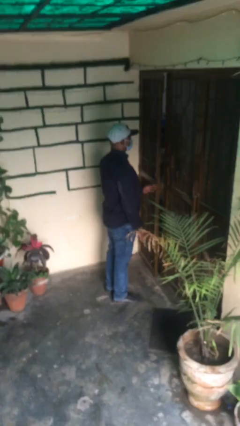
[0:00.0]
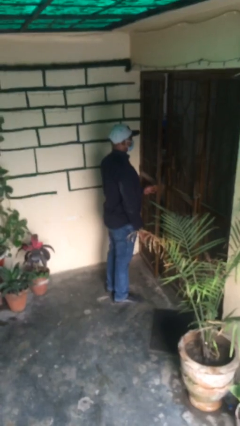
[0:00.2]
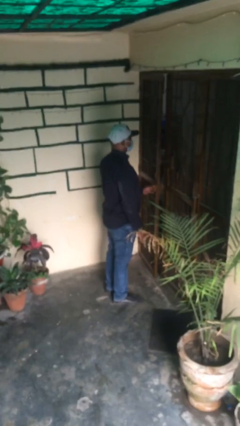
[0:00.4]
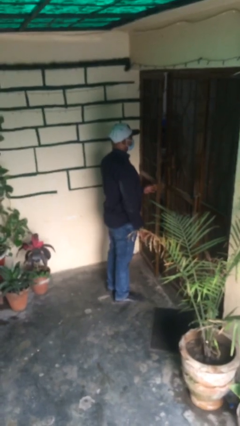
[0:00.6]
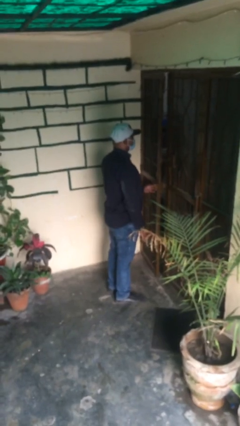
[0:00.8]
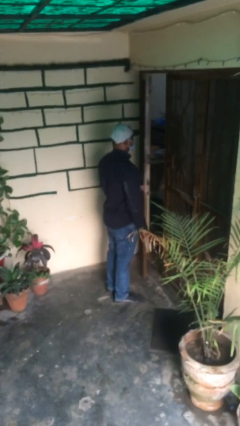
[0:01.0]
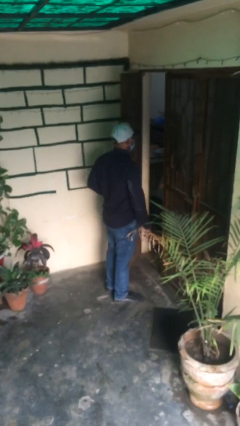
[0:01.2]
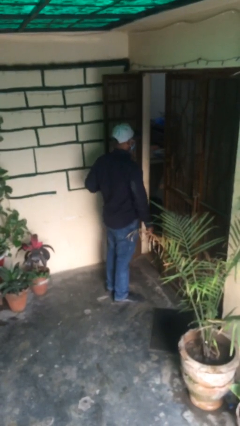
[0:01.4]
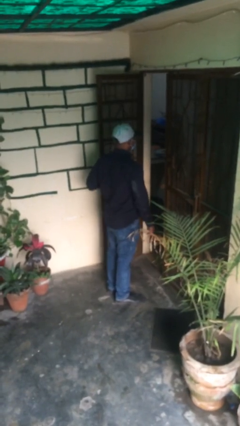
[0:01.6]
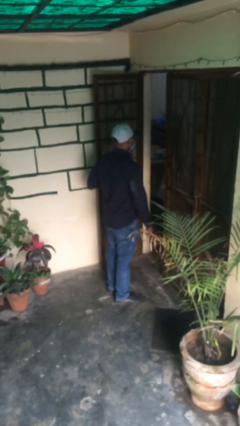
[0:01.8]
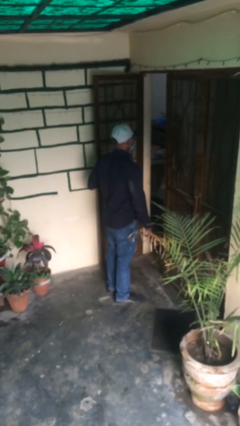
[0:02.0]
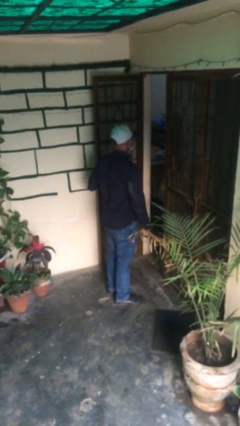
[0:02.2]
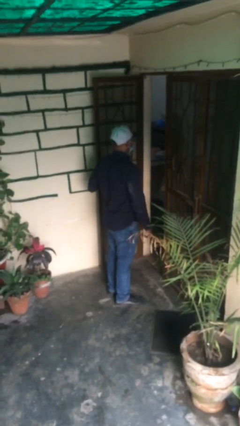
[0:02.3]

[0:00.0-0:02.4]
person opens facility door

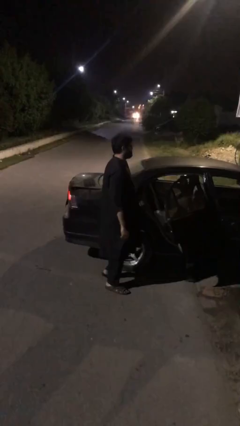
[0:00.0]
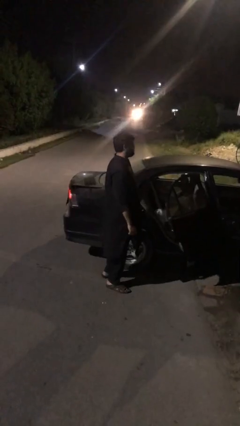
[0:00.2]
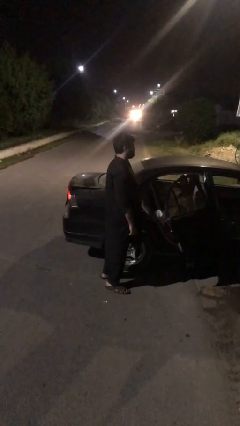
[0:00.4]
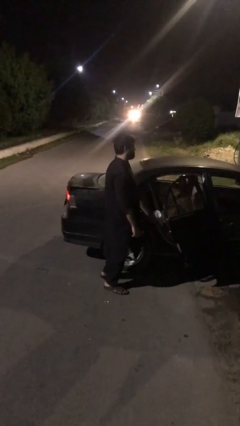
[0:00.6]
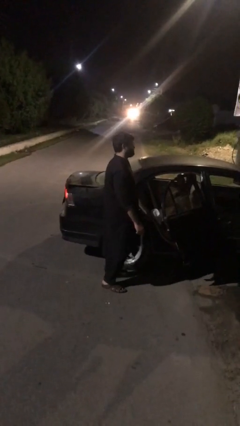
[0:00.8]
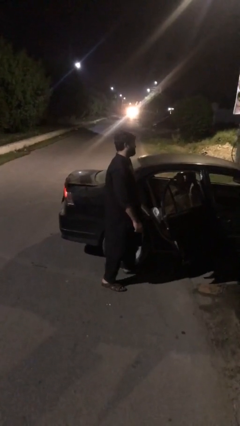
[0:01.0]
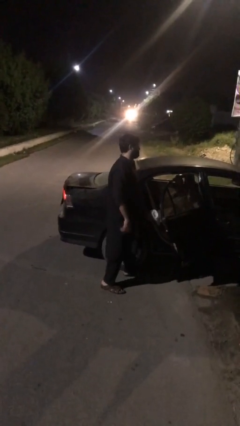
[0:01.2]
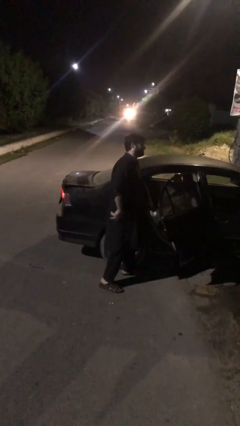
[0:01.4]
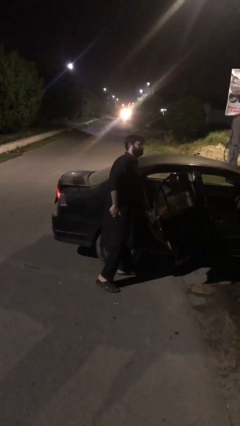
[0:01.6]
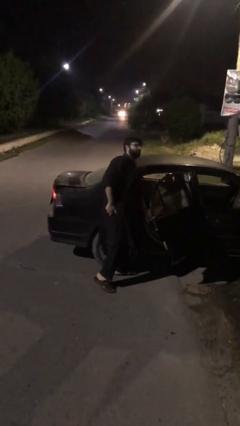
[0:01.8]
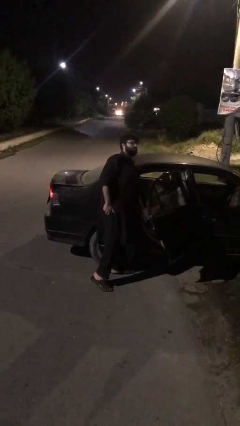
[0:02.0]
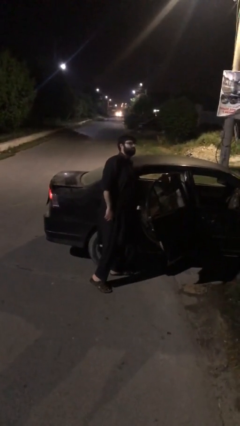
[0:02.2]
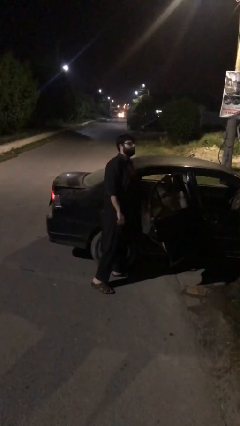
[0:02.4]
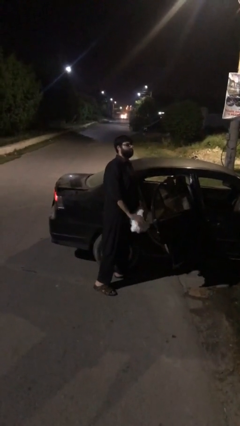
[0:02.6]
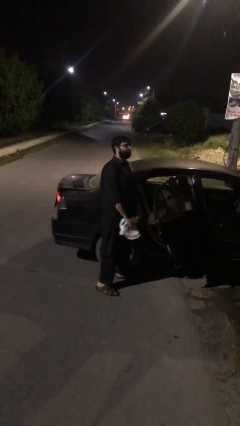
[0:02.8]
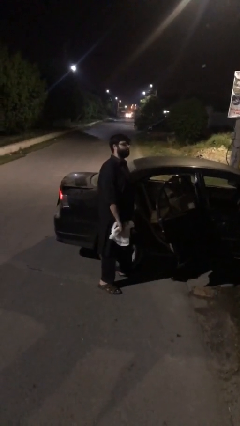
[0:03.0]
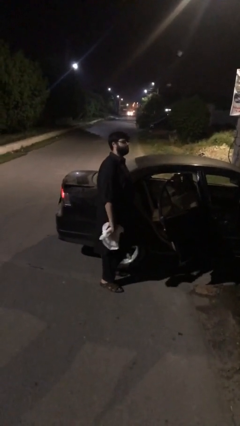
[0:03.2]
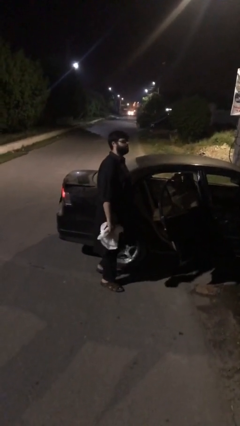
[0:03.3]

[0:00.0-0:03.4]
person unloads car

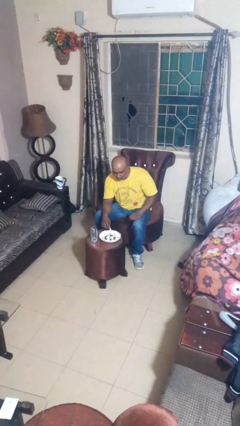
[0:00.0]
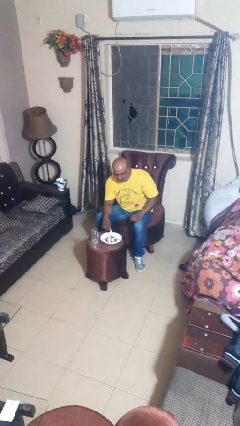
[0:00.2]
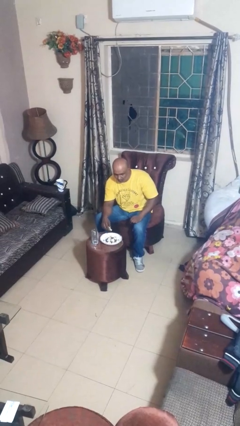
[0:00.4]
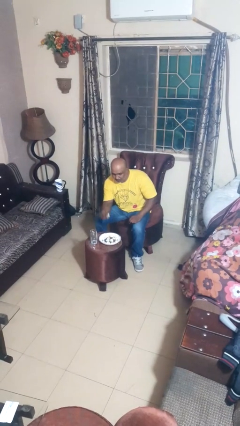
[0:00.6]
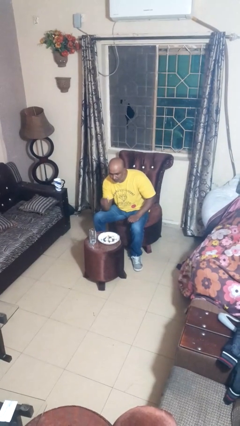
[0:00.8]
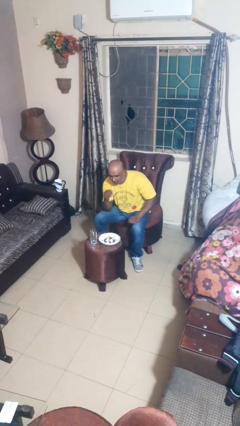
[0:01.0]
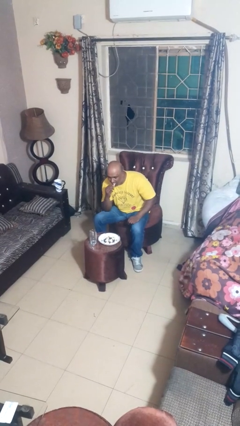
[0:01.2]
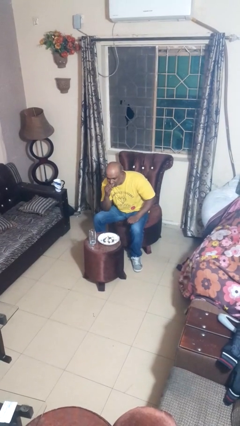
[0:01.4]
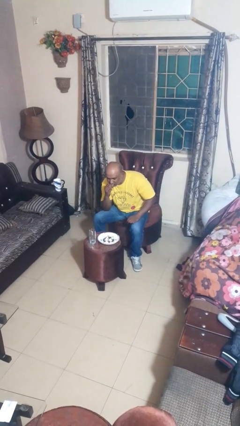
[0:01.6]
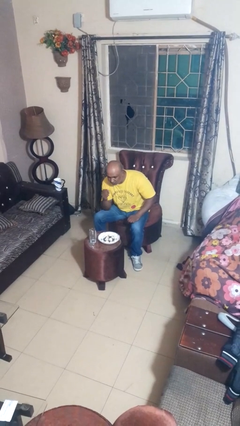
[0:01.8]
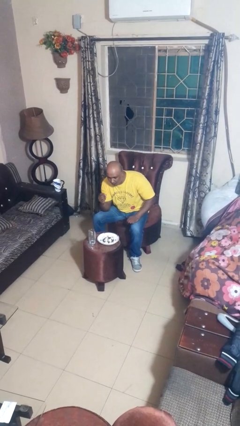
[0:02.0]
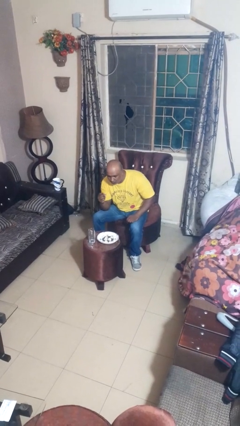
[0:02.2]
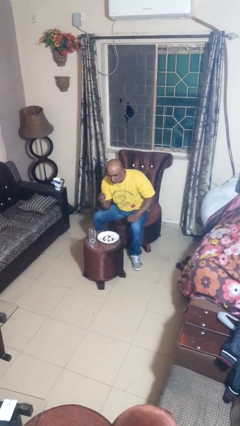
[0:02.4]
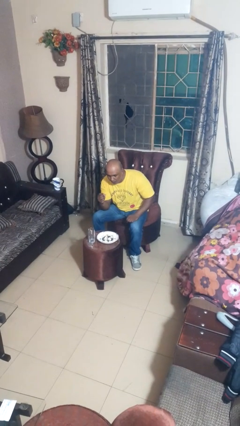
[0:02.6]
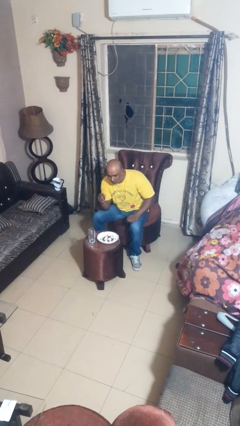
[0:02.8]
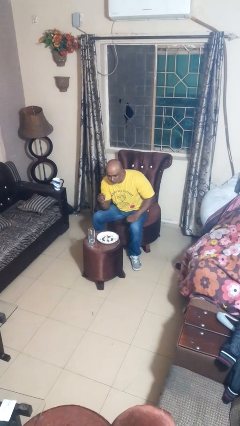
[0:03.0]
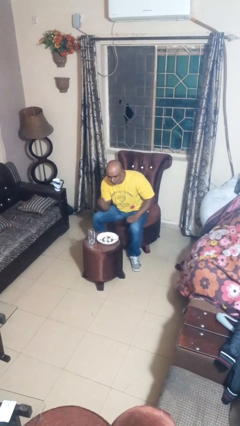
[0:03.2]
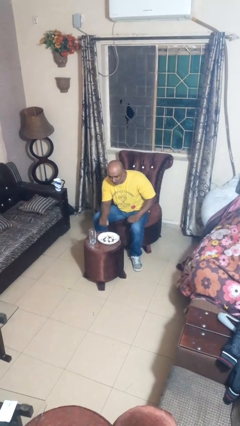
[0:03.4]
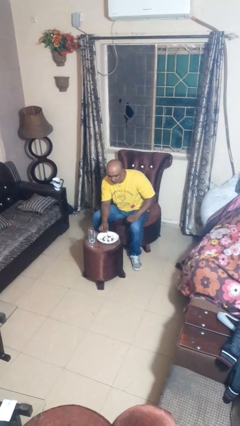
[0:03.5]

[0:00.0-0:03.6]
person eats with hands

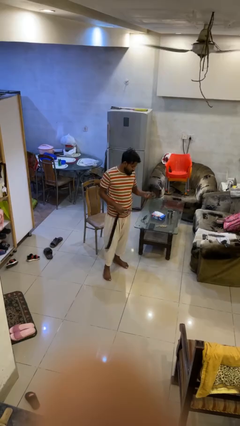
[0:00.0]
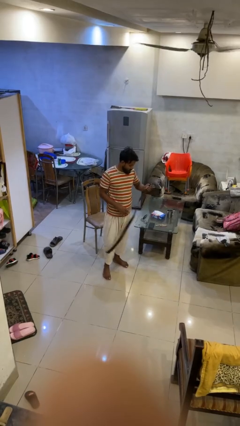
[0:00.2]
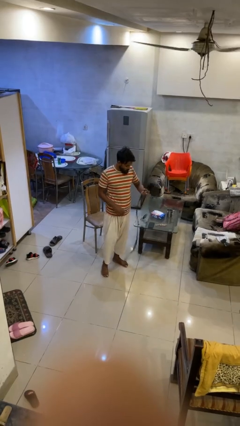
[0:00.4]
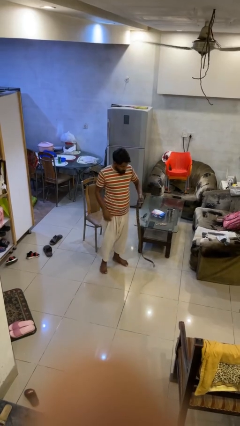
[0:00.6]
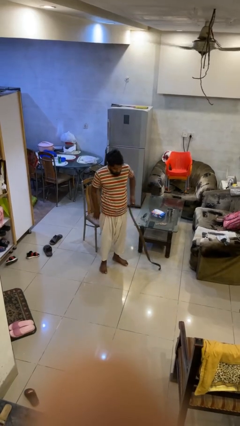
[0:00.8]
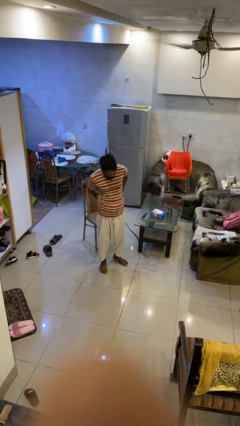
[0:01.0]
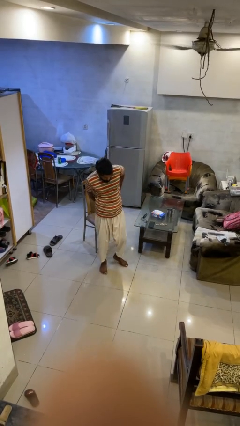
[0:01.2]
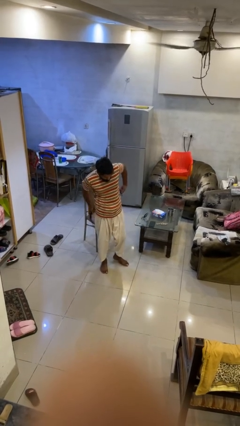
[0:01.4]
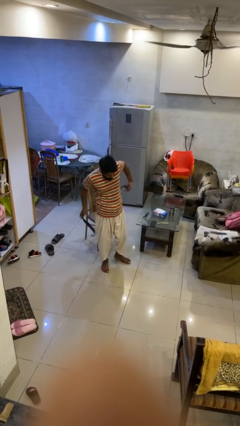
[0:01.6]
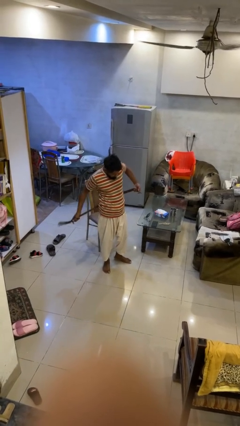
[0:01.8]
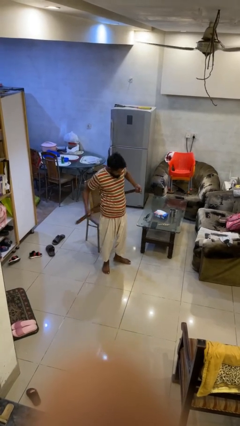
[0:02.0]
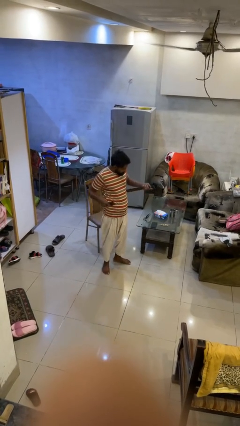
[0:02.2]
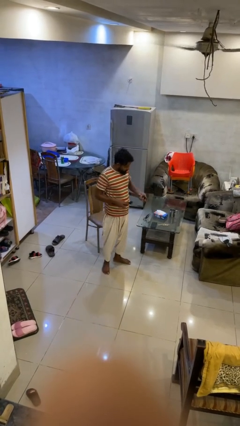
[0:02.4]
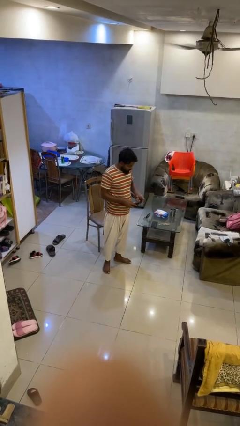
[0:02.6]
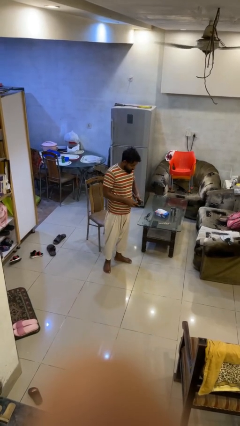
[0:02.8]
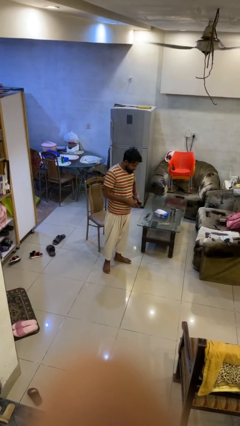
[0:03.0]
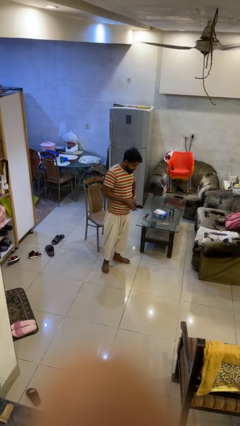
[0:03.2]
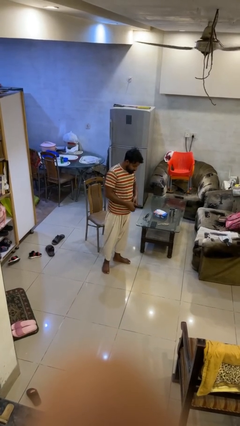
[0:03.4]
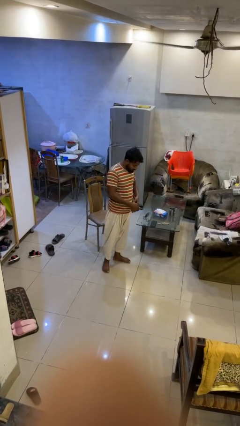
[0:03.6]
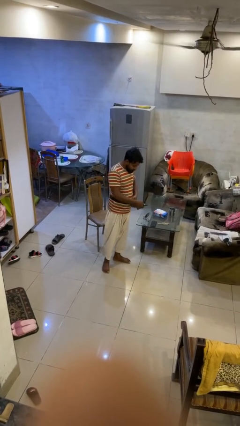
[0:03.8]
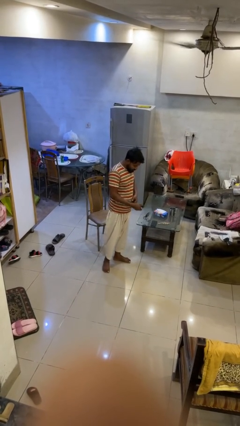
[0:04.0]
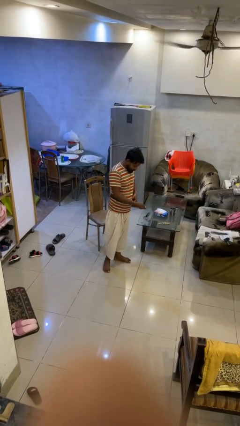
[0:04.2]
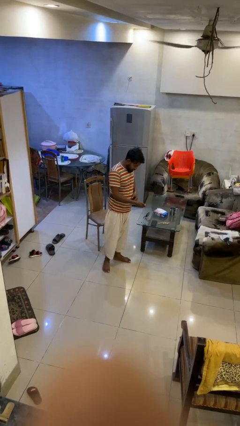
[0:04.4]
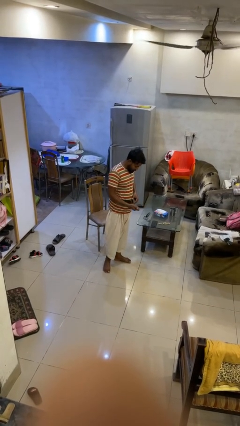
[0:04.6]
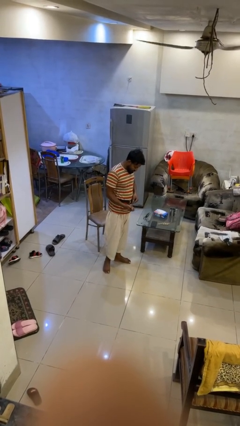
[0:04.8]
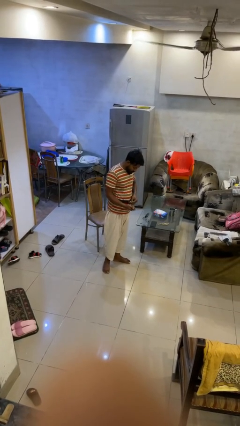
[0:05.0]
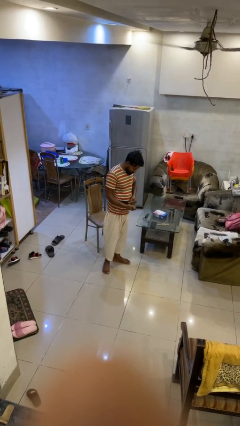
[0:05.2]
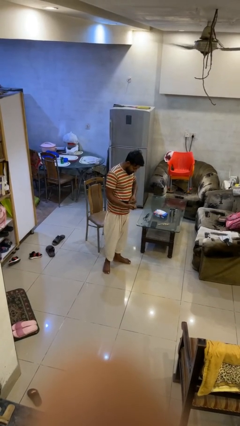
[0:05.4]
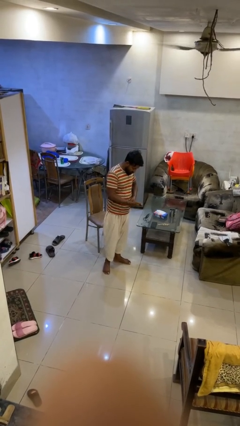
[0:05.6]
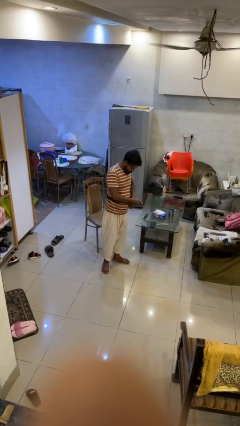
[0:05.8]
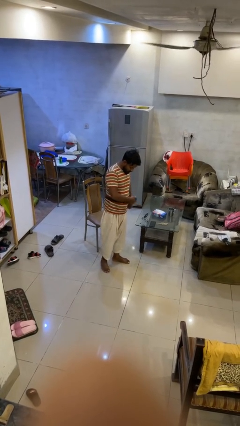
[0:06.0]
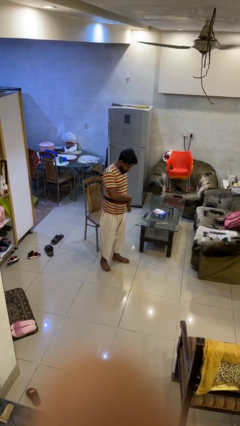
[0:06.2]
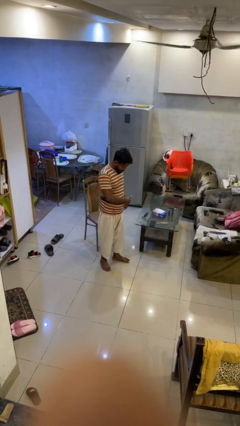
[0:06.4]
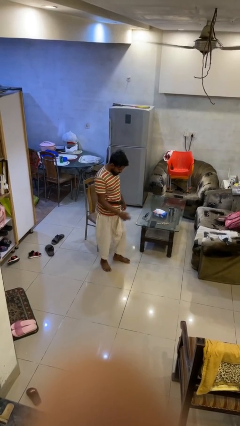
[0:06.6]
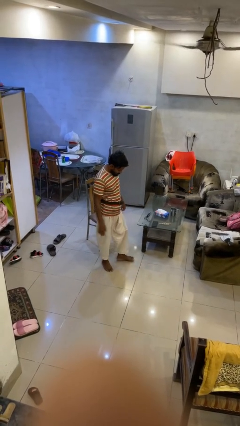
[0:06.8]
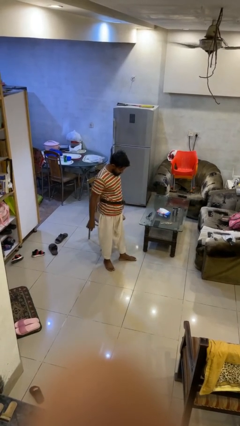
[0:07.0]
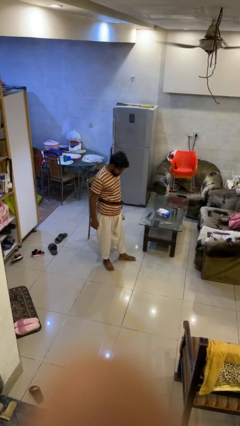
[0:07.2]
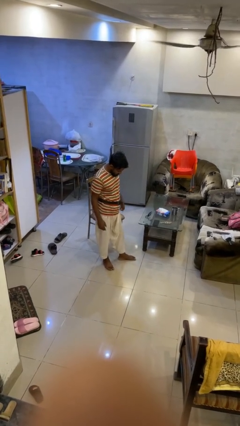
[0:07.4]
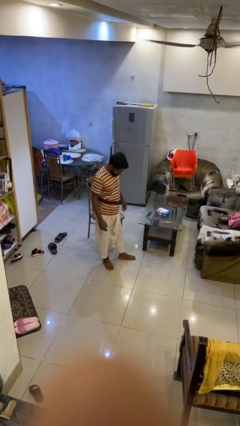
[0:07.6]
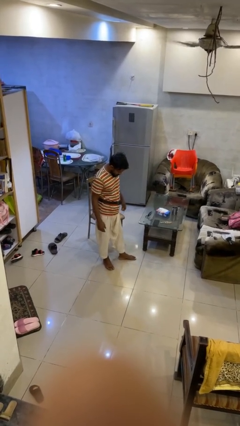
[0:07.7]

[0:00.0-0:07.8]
person puts on belt

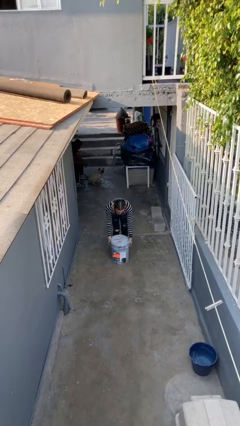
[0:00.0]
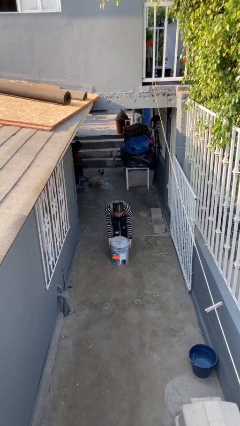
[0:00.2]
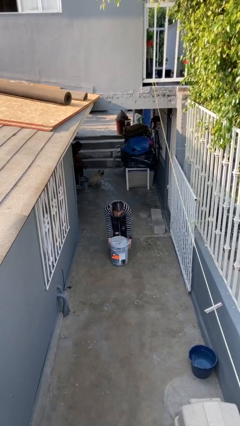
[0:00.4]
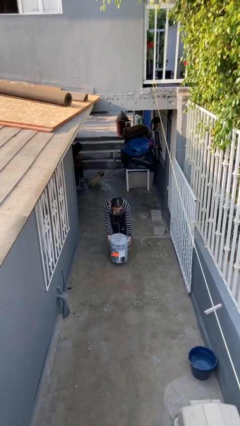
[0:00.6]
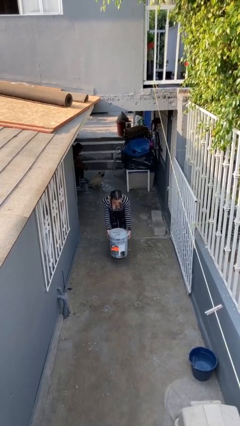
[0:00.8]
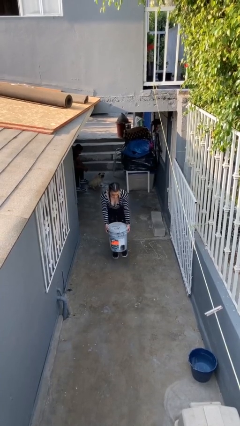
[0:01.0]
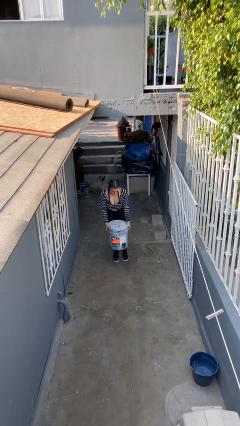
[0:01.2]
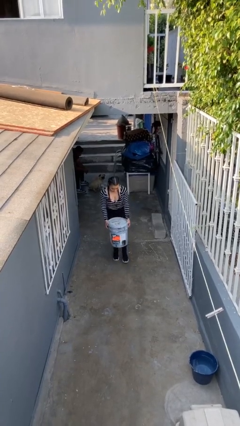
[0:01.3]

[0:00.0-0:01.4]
person picks up object from floor
